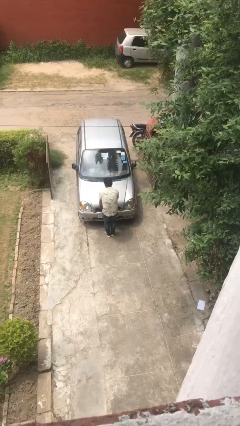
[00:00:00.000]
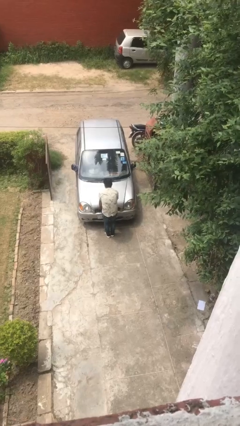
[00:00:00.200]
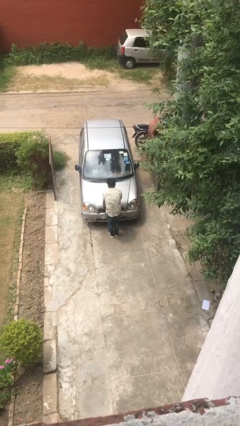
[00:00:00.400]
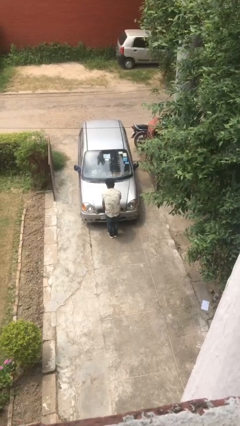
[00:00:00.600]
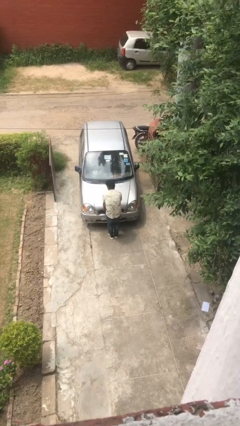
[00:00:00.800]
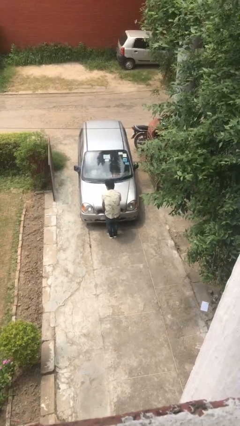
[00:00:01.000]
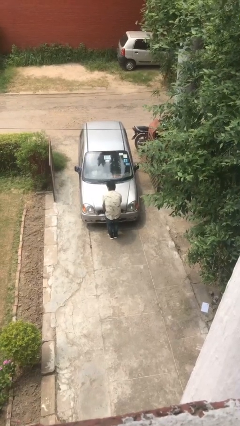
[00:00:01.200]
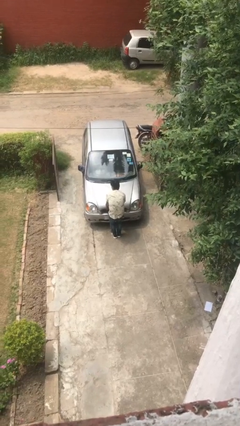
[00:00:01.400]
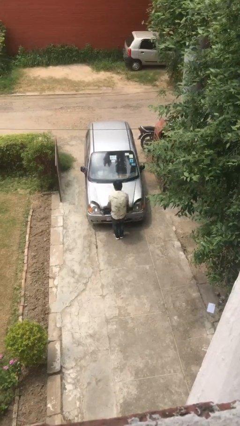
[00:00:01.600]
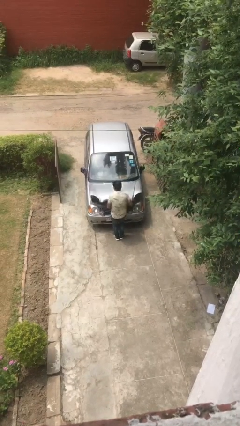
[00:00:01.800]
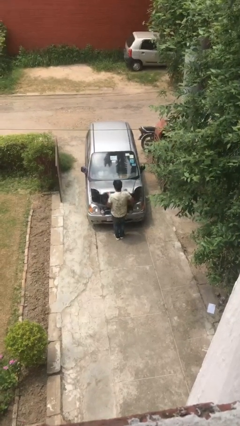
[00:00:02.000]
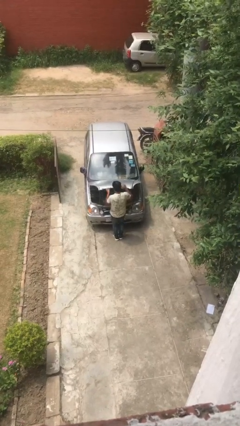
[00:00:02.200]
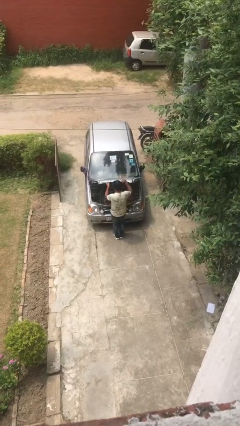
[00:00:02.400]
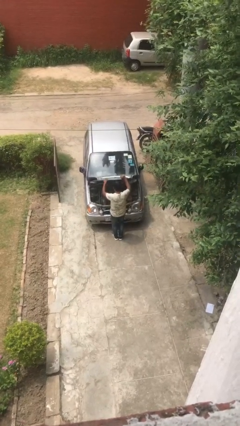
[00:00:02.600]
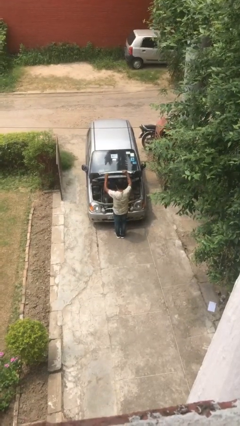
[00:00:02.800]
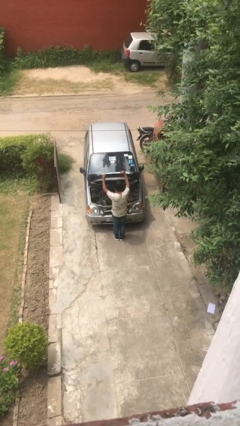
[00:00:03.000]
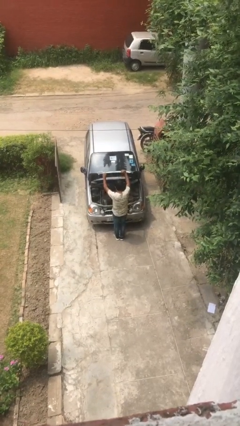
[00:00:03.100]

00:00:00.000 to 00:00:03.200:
person opens car hood

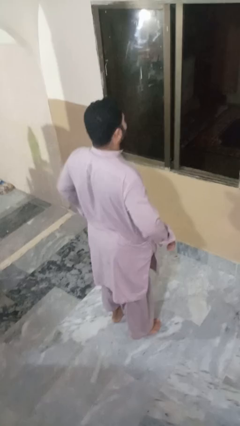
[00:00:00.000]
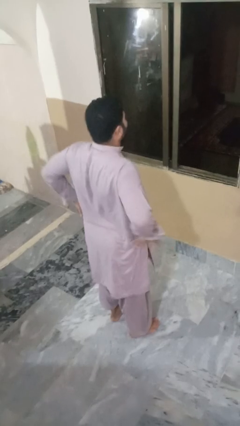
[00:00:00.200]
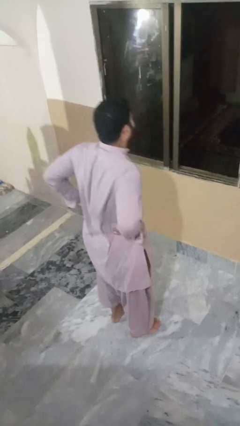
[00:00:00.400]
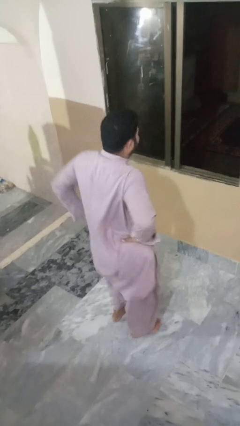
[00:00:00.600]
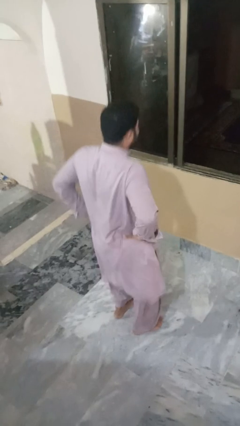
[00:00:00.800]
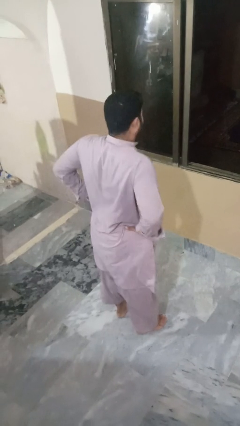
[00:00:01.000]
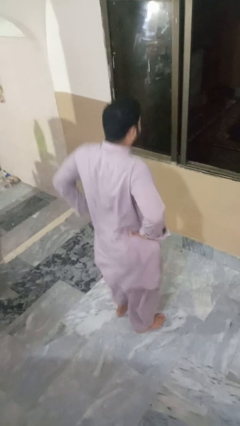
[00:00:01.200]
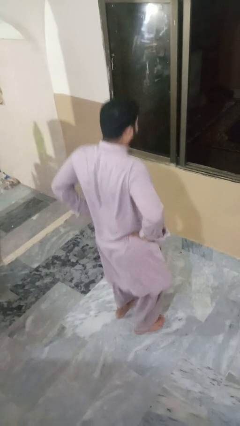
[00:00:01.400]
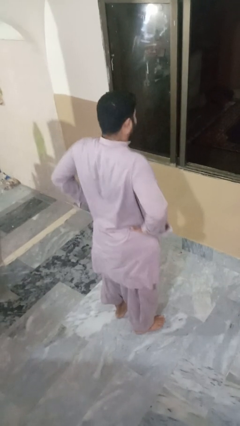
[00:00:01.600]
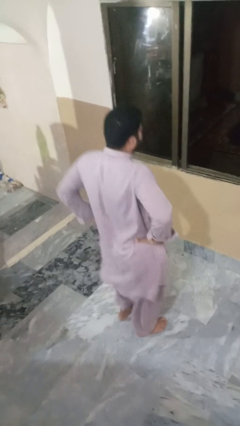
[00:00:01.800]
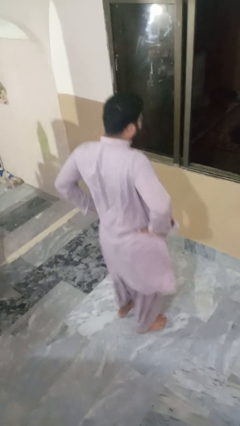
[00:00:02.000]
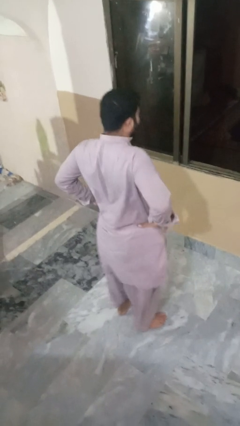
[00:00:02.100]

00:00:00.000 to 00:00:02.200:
person wiggles hips

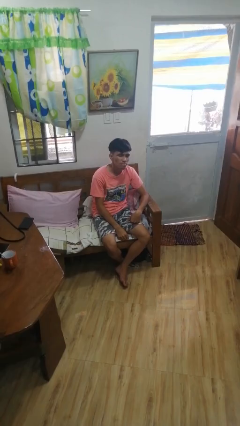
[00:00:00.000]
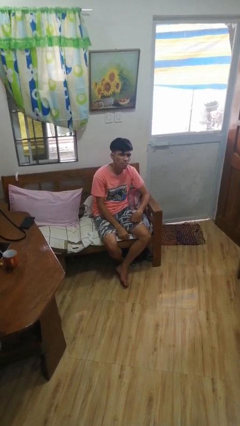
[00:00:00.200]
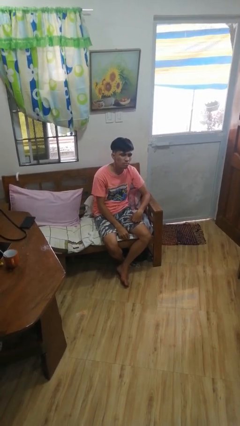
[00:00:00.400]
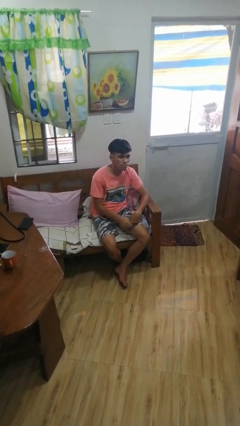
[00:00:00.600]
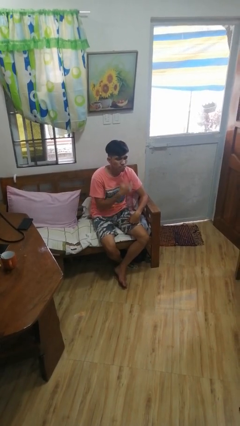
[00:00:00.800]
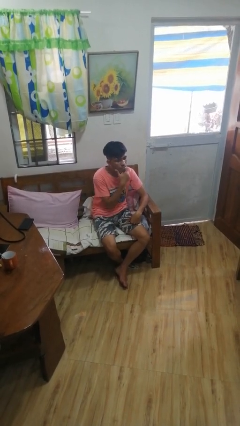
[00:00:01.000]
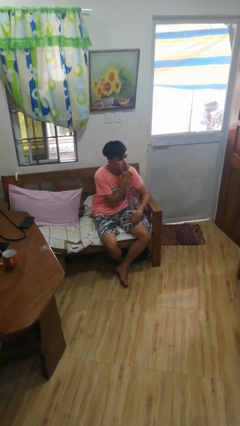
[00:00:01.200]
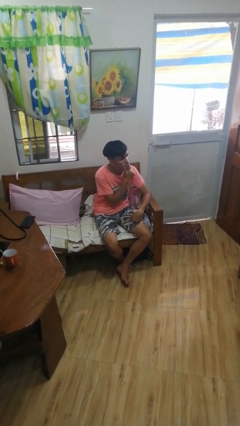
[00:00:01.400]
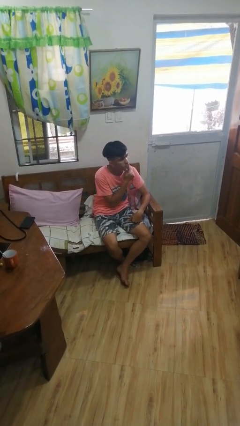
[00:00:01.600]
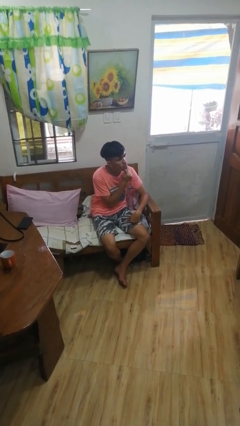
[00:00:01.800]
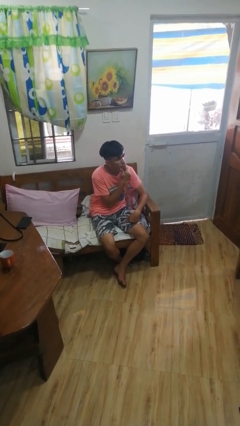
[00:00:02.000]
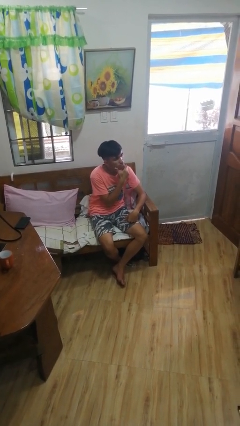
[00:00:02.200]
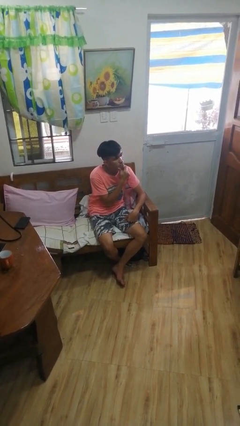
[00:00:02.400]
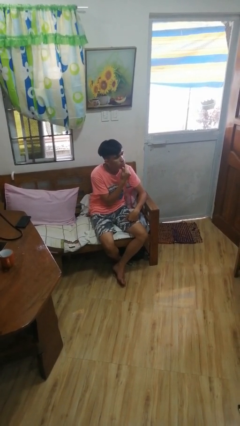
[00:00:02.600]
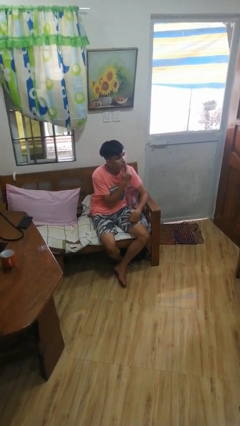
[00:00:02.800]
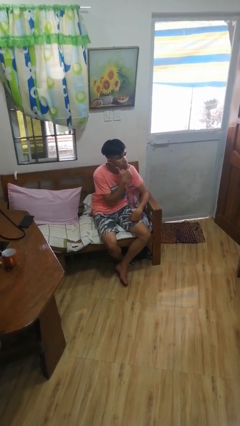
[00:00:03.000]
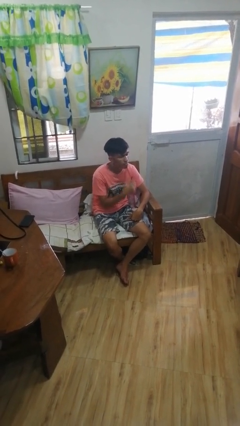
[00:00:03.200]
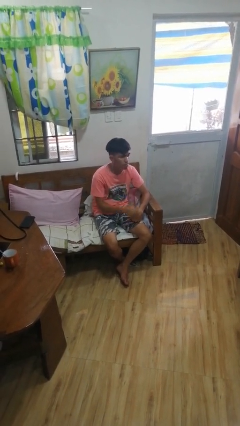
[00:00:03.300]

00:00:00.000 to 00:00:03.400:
person strokes chin

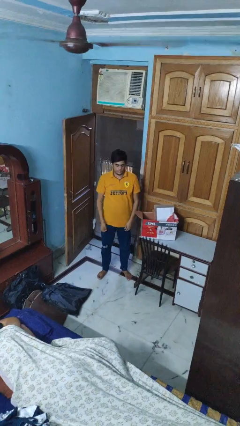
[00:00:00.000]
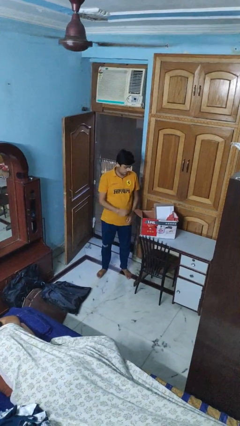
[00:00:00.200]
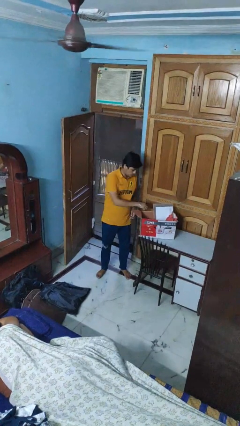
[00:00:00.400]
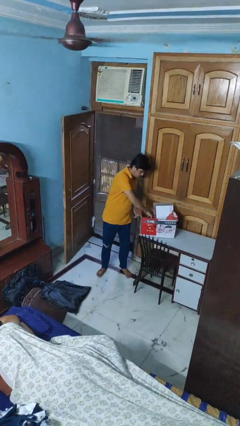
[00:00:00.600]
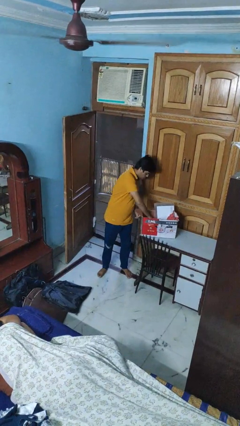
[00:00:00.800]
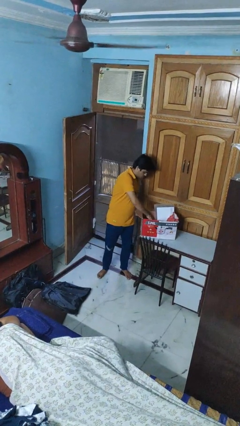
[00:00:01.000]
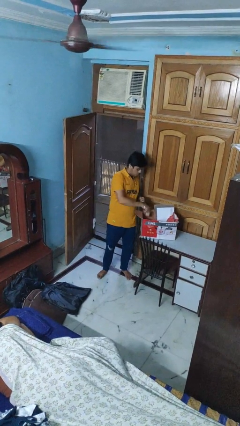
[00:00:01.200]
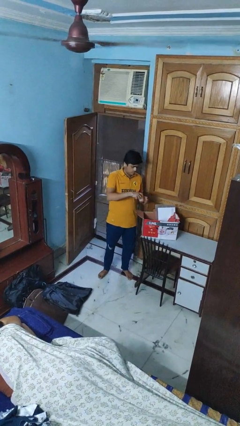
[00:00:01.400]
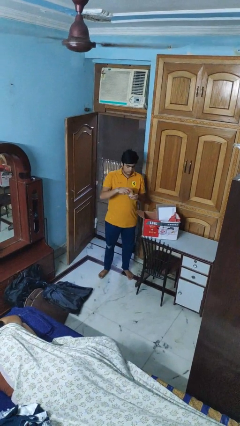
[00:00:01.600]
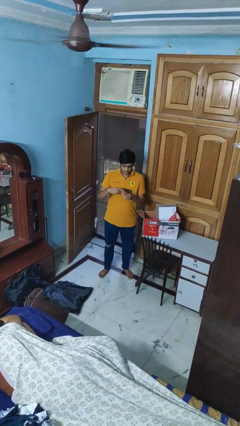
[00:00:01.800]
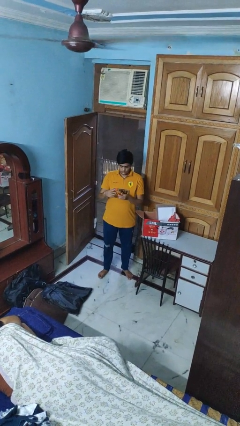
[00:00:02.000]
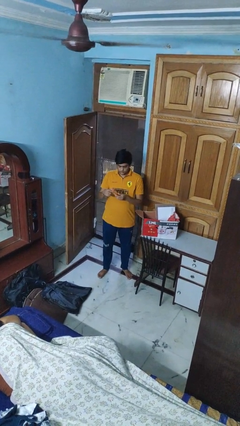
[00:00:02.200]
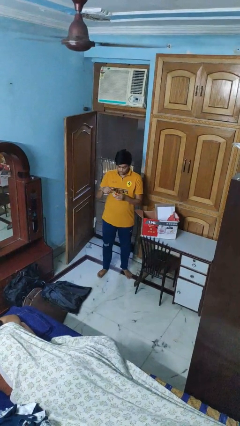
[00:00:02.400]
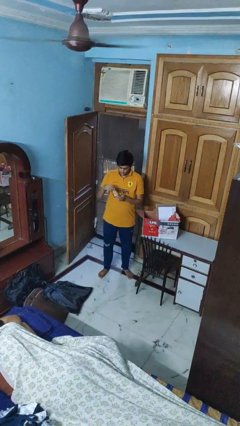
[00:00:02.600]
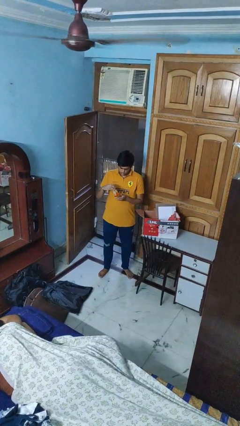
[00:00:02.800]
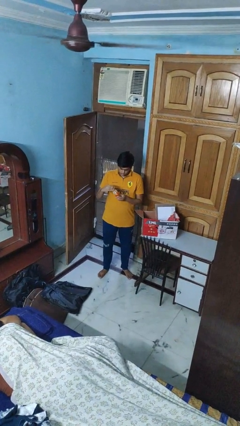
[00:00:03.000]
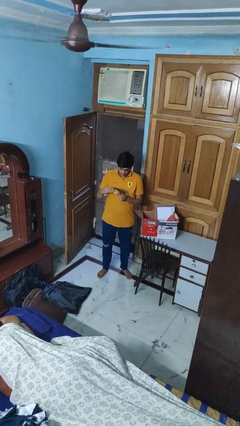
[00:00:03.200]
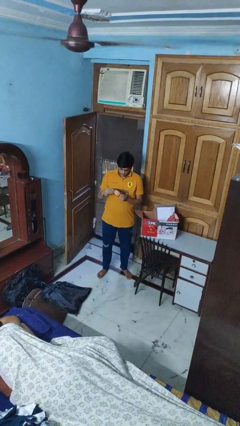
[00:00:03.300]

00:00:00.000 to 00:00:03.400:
person takes object from box

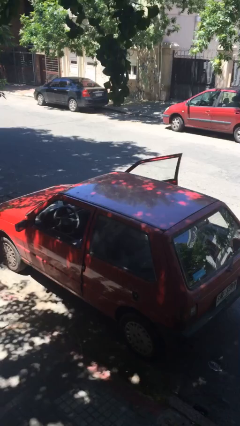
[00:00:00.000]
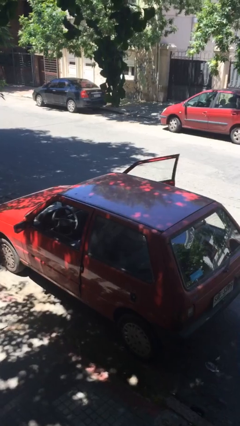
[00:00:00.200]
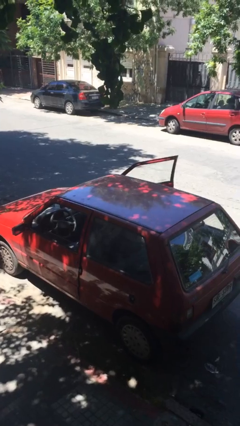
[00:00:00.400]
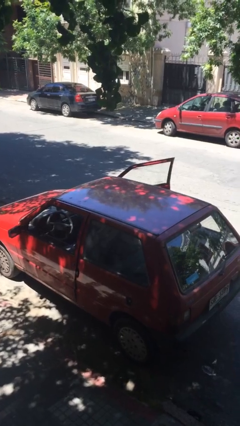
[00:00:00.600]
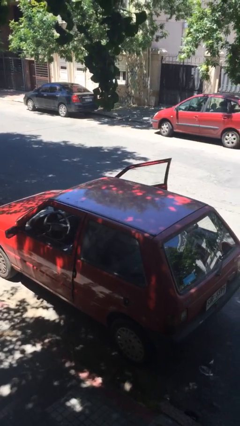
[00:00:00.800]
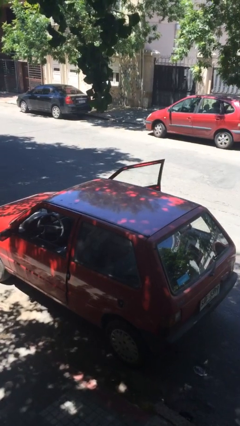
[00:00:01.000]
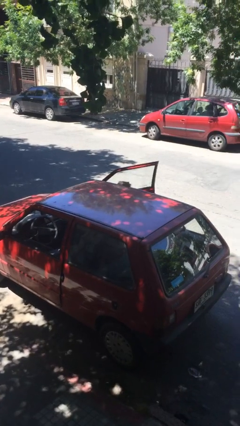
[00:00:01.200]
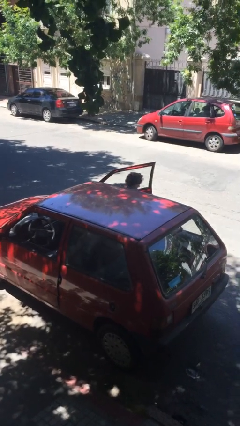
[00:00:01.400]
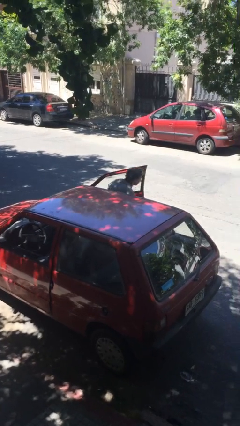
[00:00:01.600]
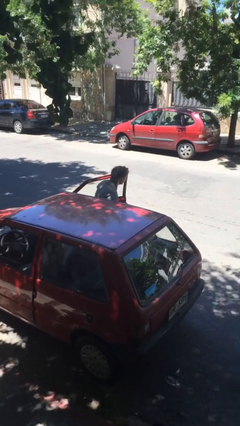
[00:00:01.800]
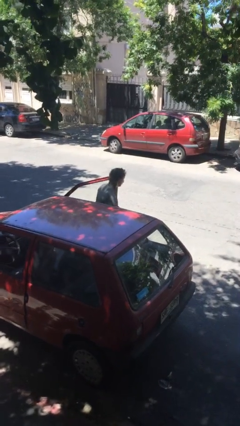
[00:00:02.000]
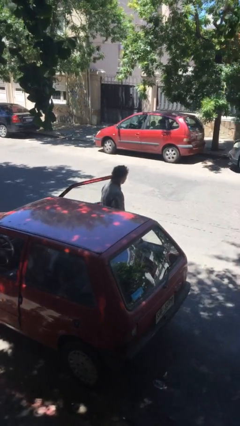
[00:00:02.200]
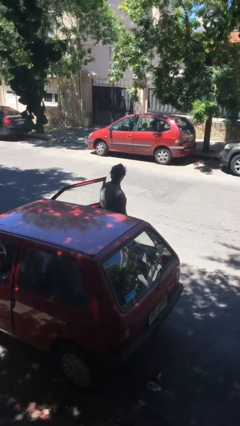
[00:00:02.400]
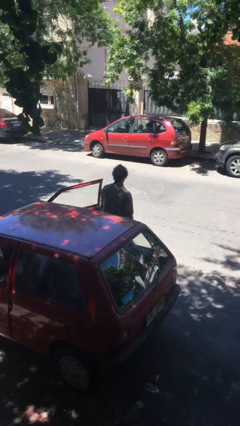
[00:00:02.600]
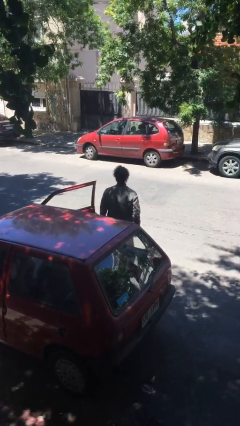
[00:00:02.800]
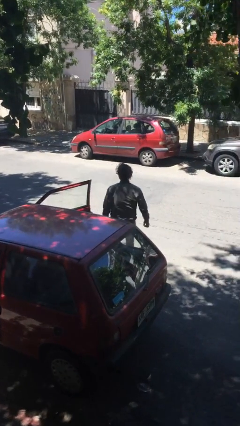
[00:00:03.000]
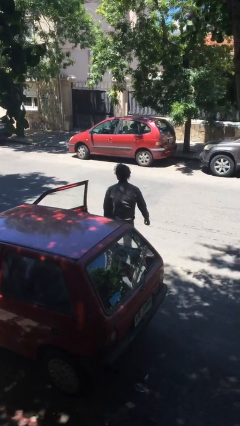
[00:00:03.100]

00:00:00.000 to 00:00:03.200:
person exits car

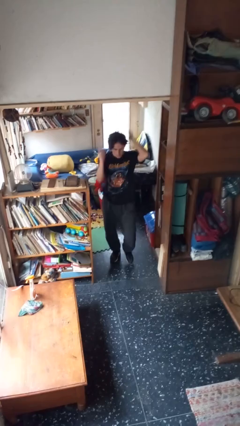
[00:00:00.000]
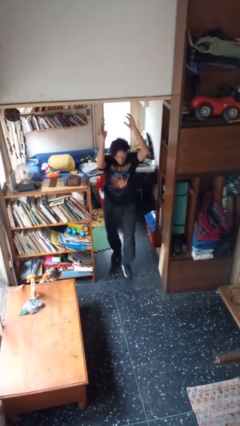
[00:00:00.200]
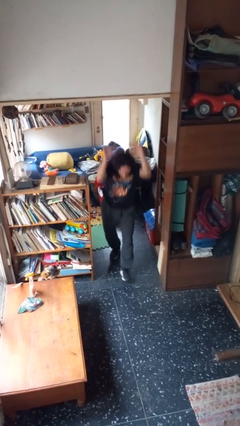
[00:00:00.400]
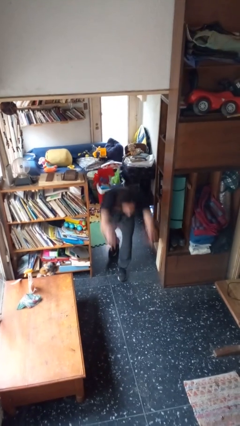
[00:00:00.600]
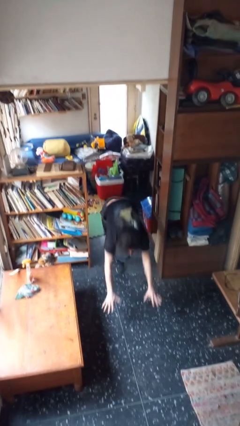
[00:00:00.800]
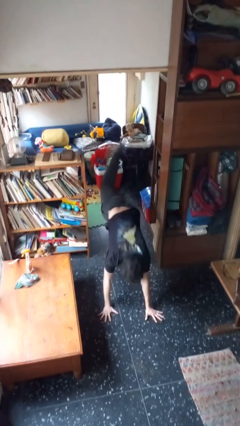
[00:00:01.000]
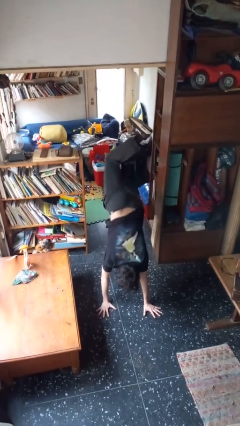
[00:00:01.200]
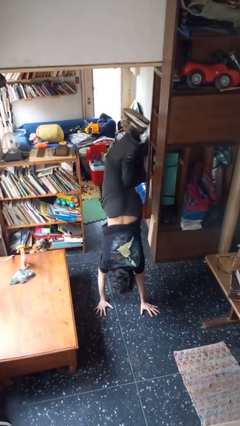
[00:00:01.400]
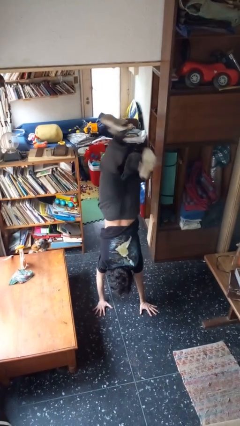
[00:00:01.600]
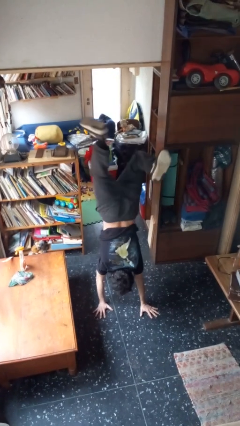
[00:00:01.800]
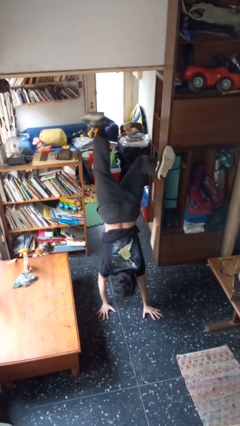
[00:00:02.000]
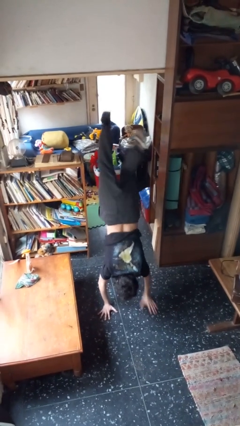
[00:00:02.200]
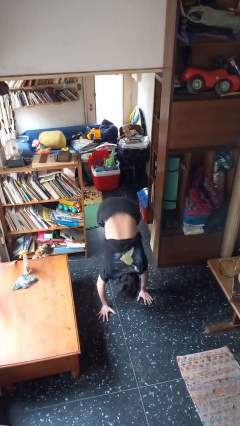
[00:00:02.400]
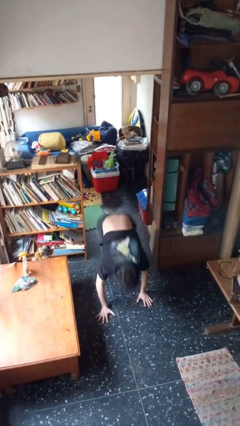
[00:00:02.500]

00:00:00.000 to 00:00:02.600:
person handstand
